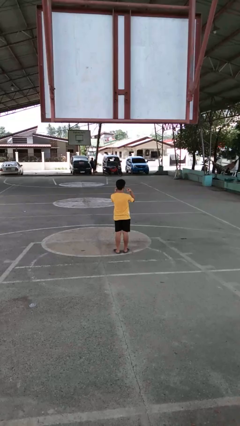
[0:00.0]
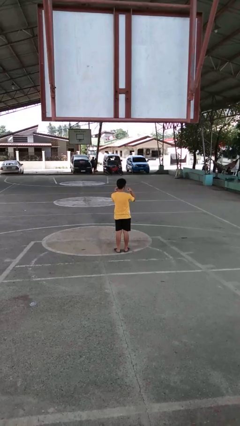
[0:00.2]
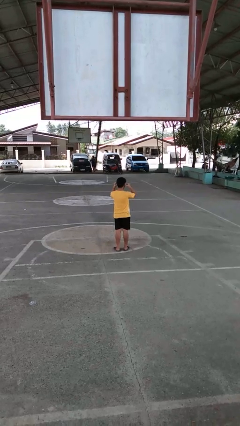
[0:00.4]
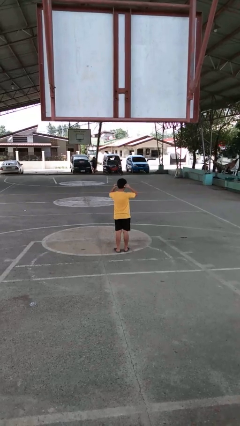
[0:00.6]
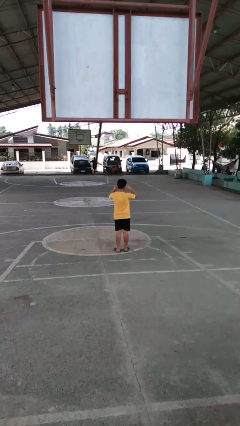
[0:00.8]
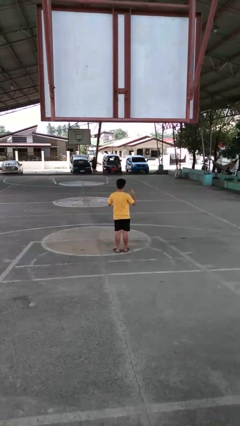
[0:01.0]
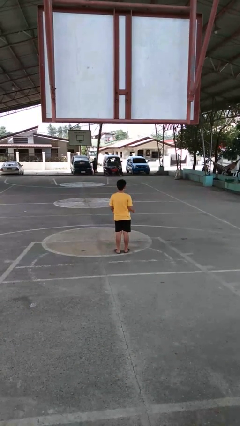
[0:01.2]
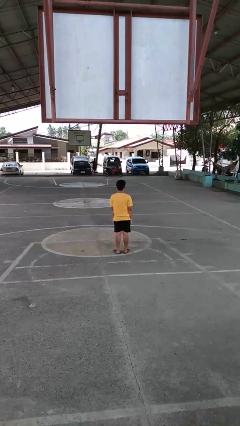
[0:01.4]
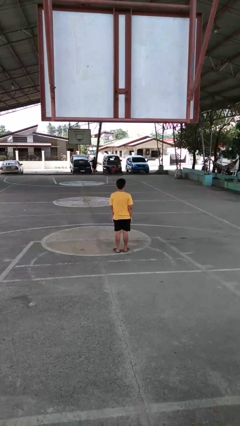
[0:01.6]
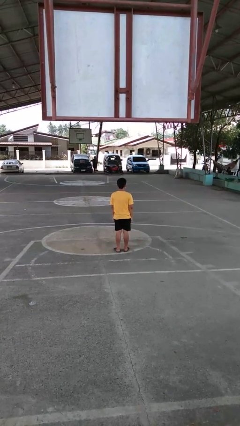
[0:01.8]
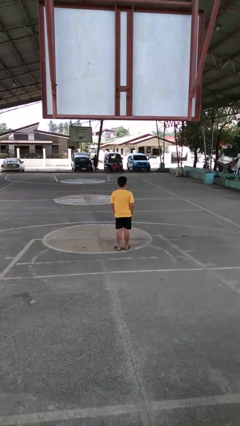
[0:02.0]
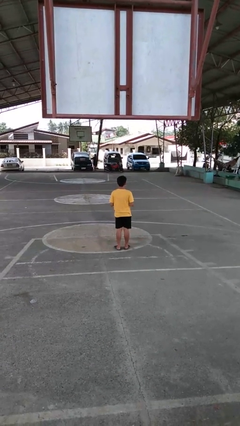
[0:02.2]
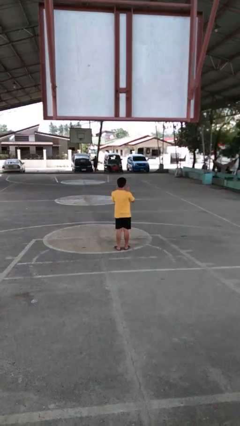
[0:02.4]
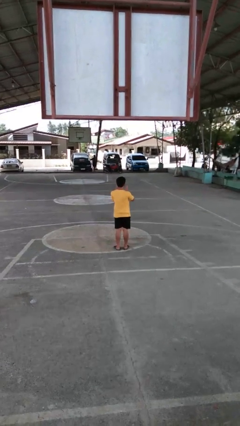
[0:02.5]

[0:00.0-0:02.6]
person puts on facemask

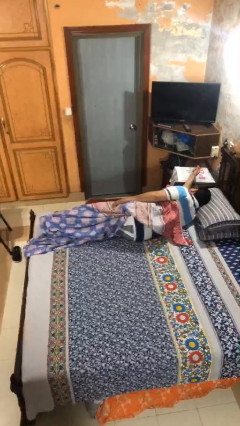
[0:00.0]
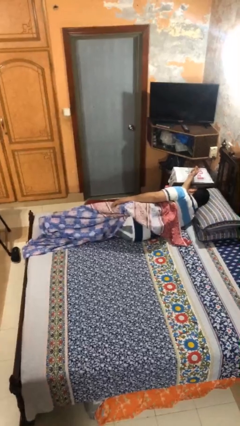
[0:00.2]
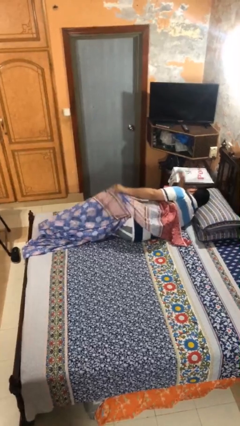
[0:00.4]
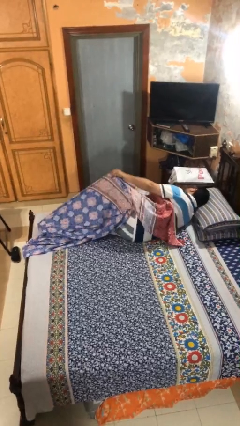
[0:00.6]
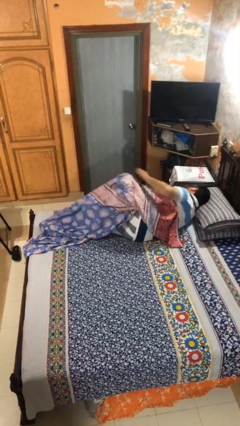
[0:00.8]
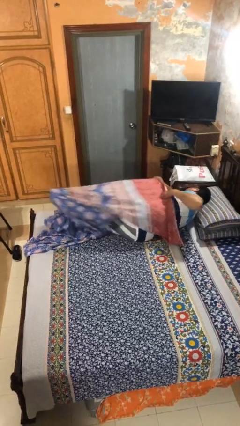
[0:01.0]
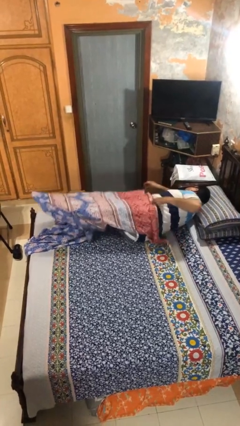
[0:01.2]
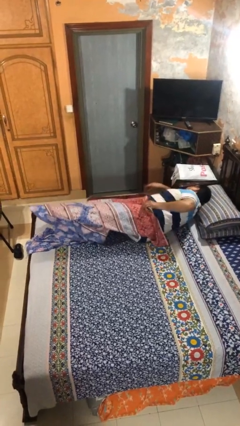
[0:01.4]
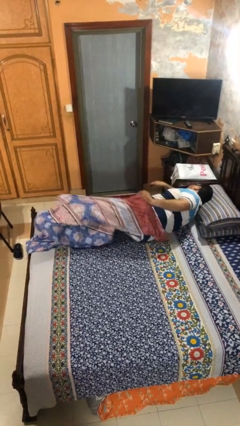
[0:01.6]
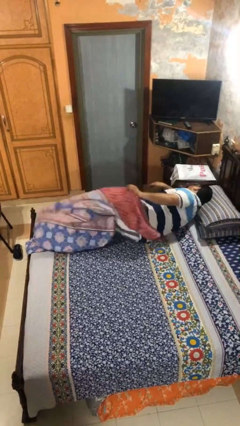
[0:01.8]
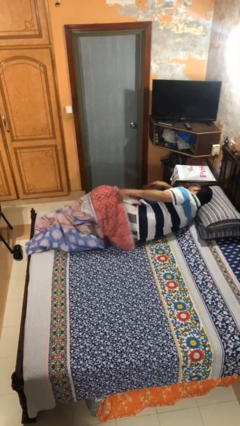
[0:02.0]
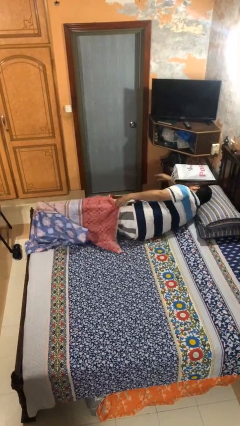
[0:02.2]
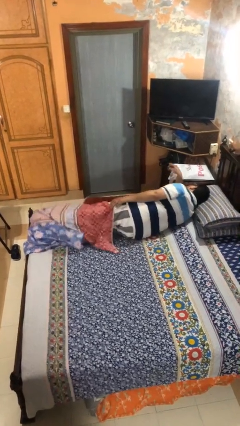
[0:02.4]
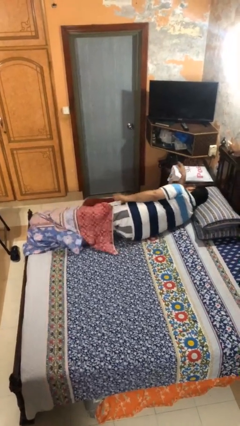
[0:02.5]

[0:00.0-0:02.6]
person uncovers with bedsheets

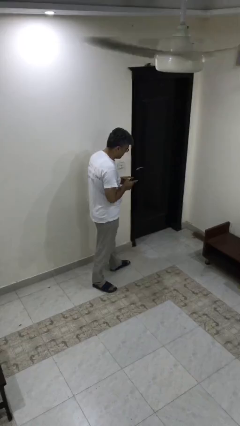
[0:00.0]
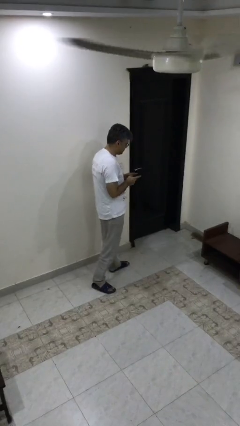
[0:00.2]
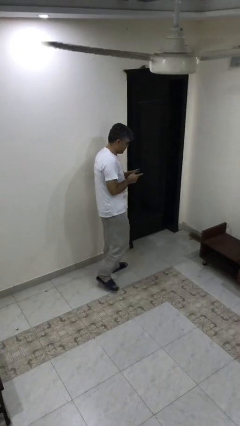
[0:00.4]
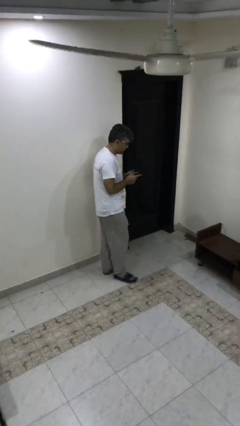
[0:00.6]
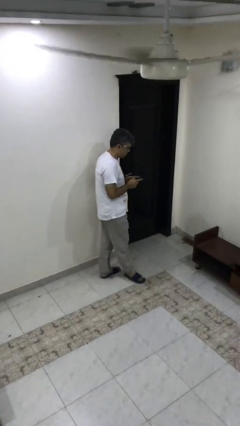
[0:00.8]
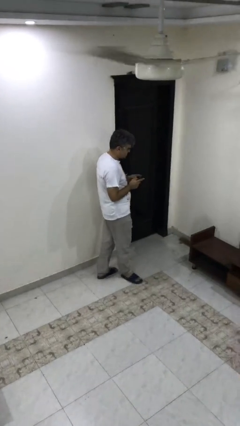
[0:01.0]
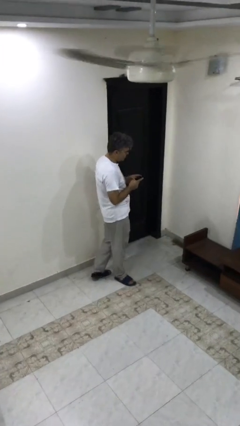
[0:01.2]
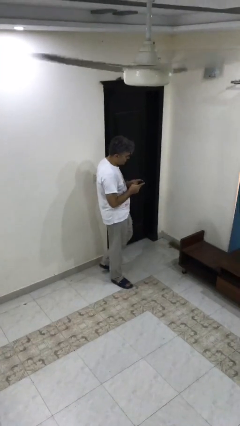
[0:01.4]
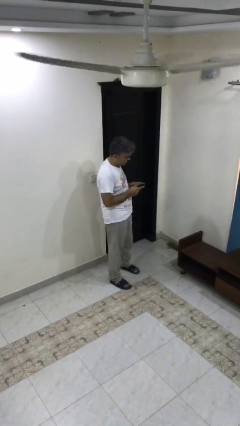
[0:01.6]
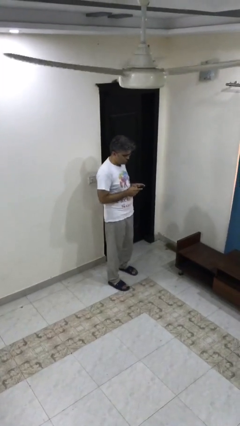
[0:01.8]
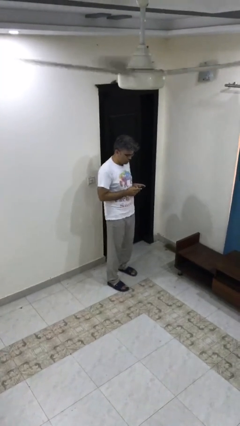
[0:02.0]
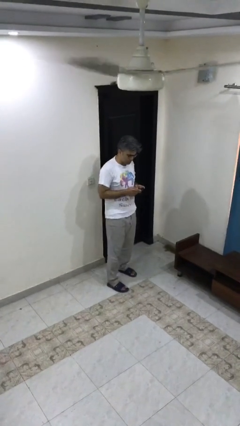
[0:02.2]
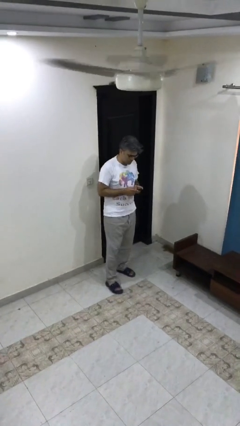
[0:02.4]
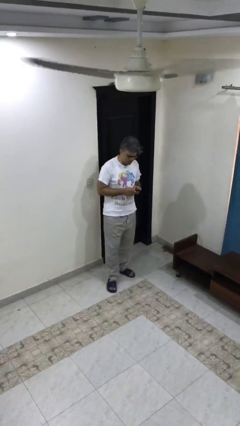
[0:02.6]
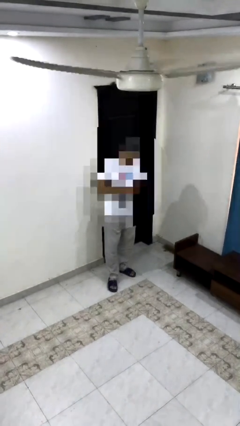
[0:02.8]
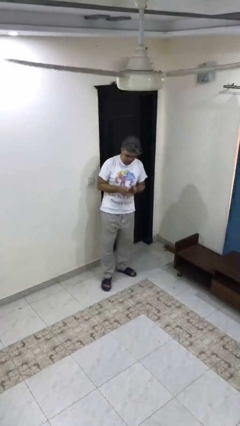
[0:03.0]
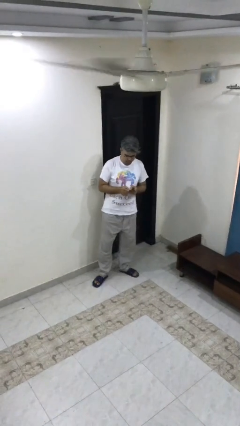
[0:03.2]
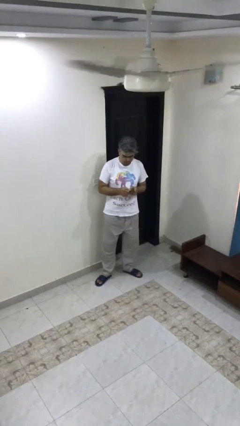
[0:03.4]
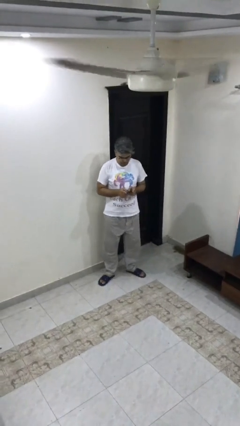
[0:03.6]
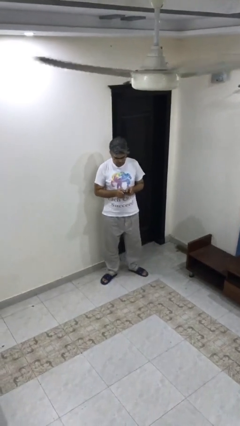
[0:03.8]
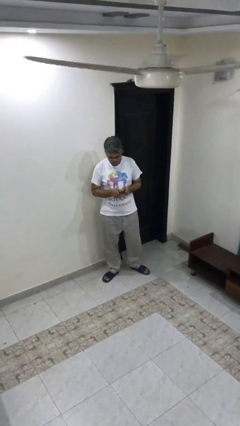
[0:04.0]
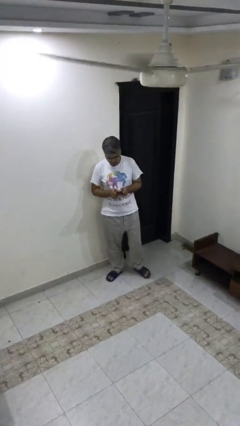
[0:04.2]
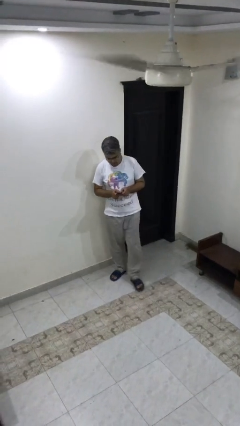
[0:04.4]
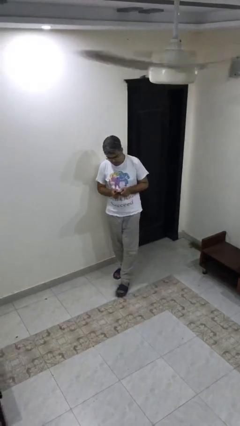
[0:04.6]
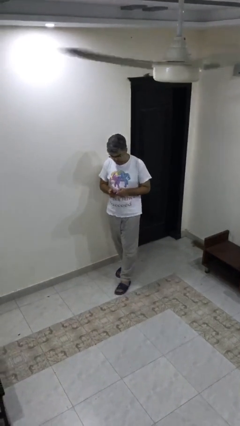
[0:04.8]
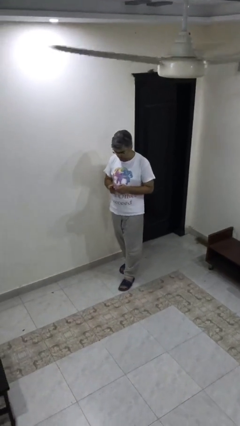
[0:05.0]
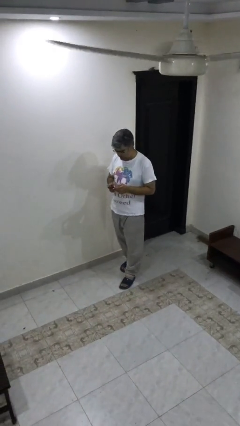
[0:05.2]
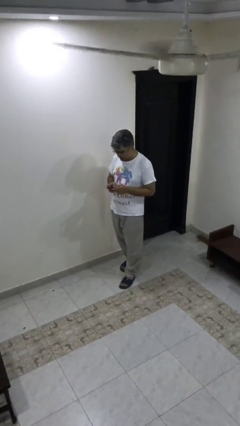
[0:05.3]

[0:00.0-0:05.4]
person texts on phone

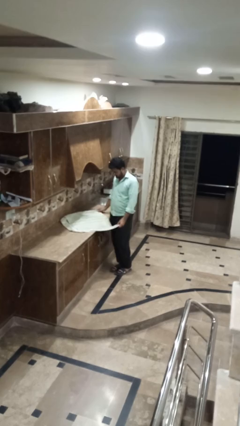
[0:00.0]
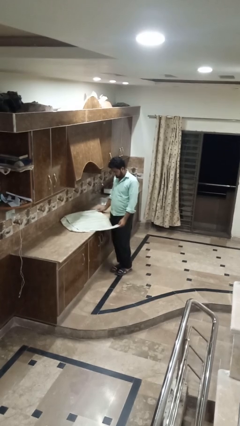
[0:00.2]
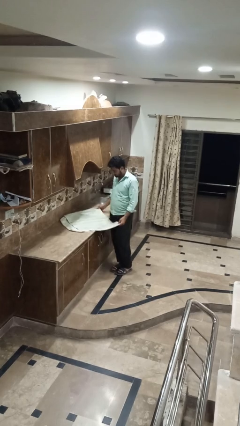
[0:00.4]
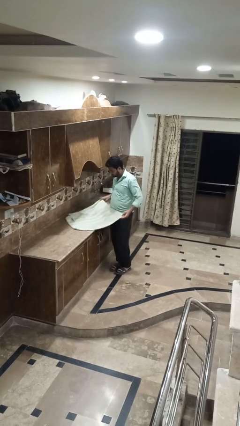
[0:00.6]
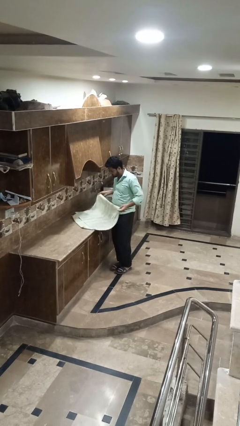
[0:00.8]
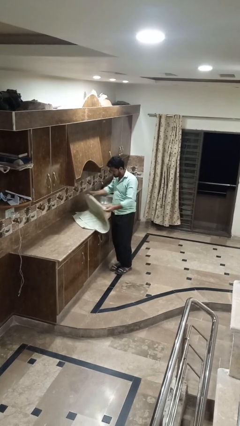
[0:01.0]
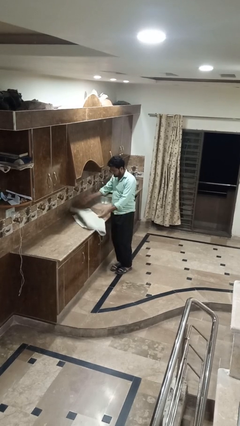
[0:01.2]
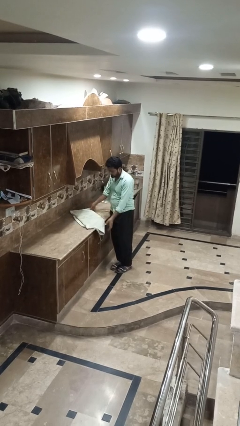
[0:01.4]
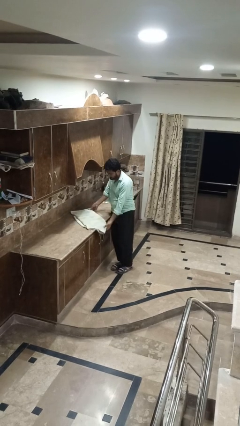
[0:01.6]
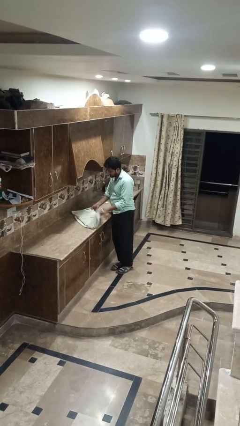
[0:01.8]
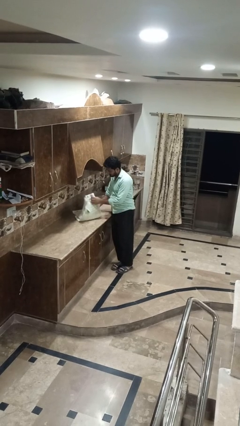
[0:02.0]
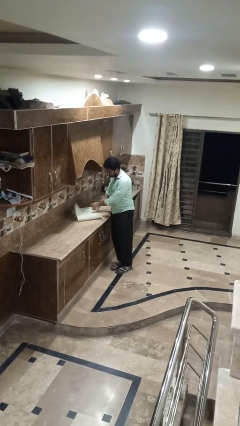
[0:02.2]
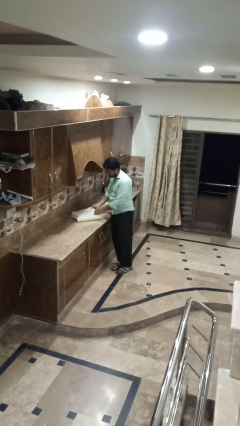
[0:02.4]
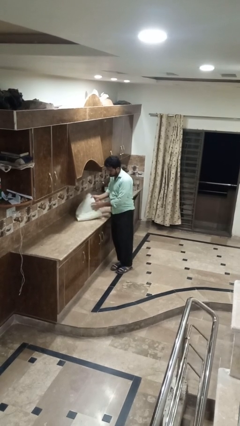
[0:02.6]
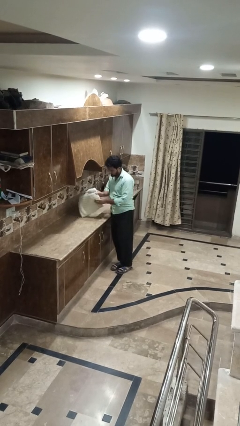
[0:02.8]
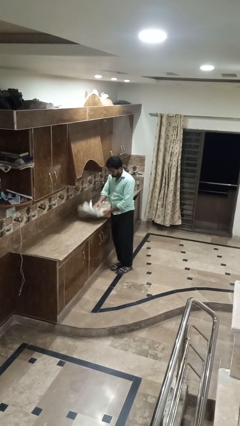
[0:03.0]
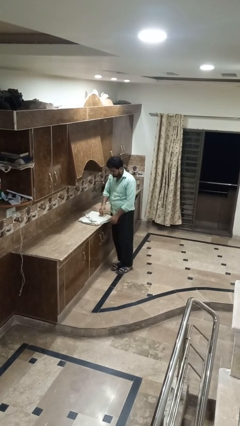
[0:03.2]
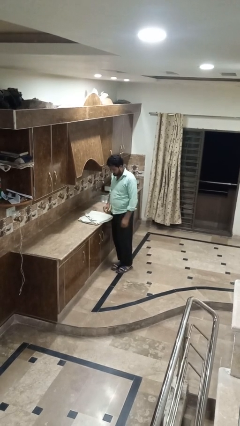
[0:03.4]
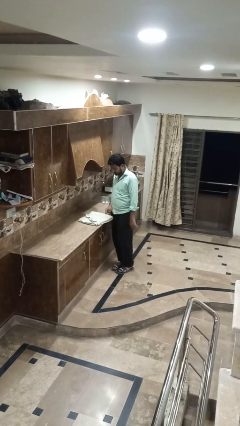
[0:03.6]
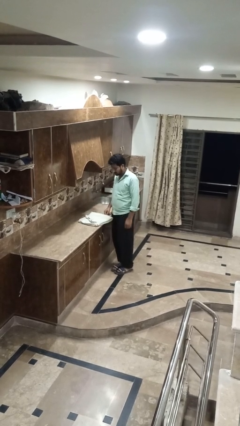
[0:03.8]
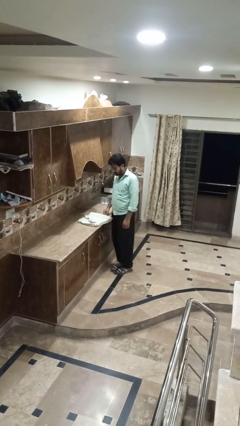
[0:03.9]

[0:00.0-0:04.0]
person folds towel

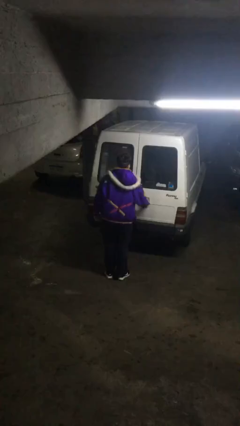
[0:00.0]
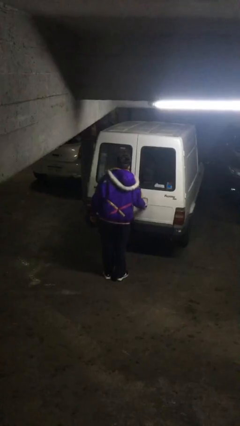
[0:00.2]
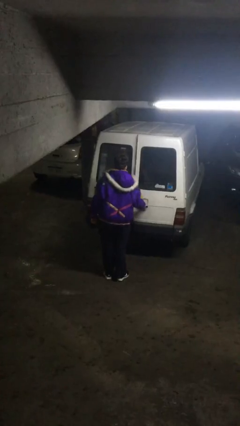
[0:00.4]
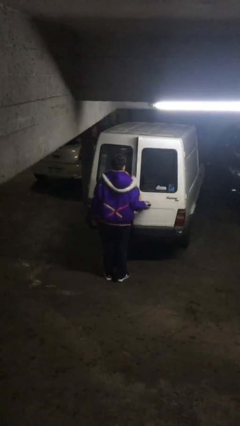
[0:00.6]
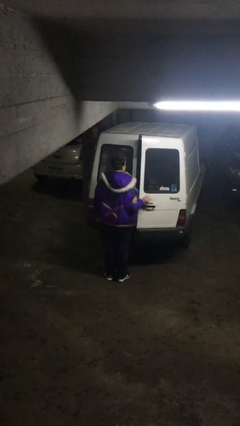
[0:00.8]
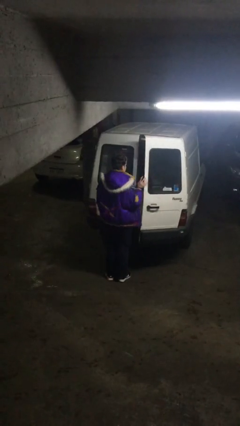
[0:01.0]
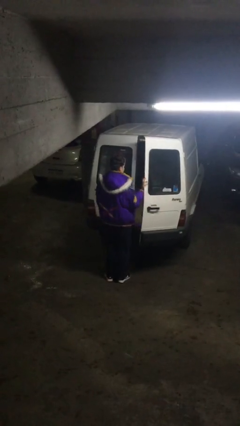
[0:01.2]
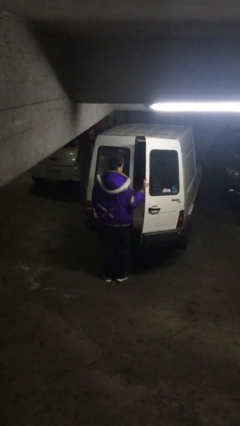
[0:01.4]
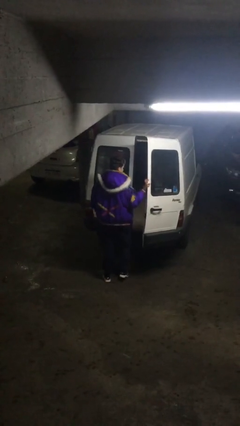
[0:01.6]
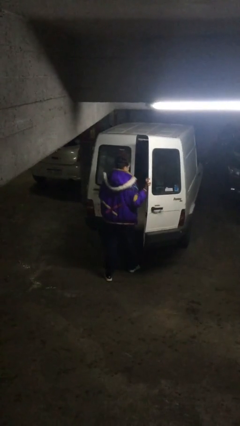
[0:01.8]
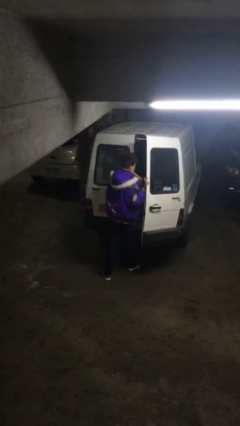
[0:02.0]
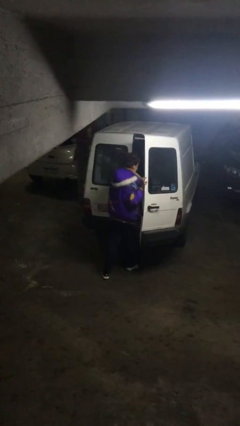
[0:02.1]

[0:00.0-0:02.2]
person opens car door

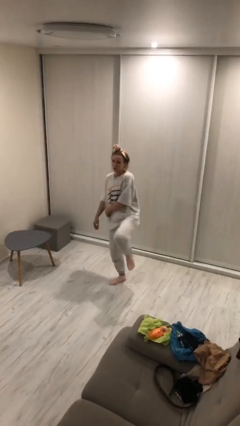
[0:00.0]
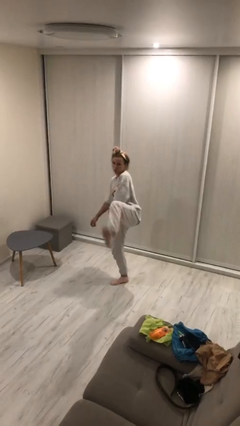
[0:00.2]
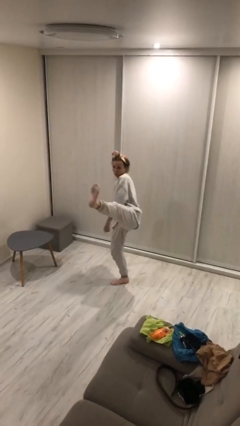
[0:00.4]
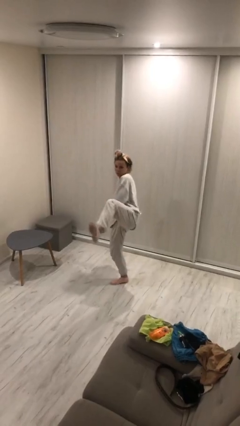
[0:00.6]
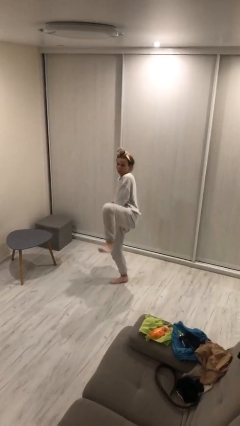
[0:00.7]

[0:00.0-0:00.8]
person karate kicks
